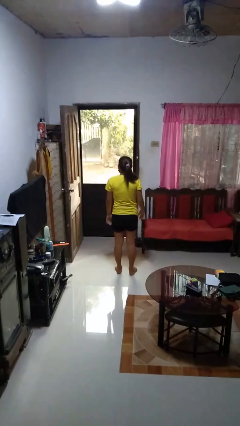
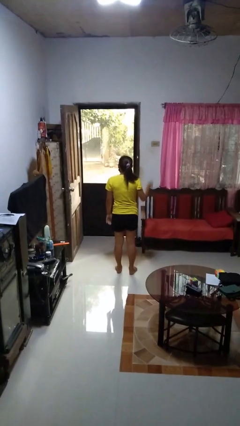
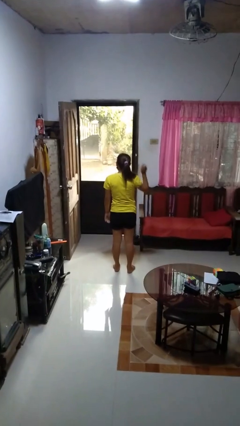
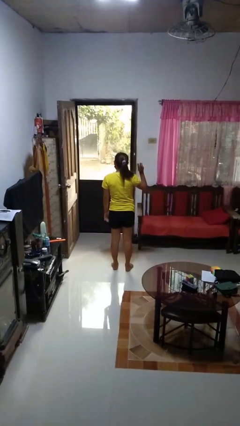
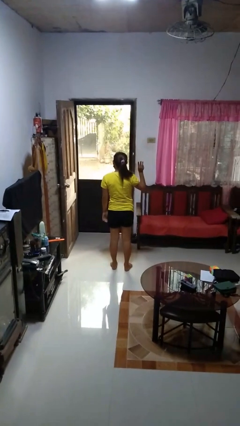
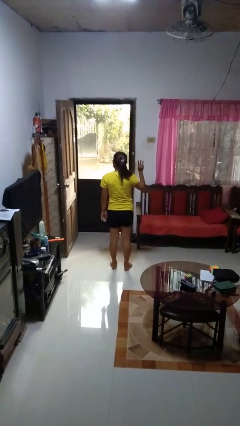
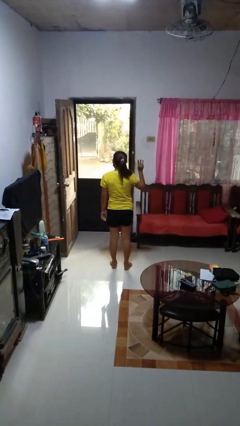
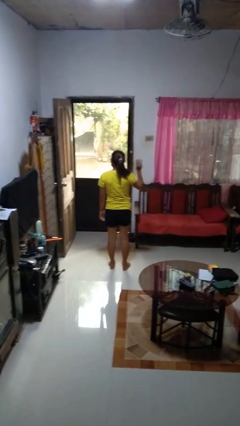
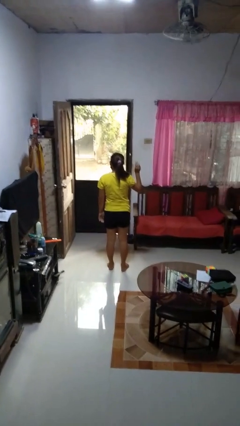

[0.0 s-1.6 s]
person gestures number three

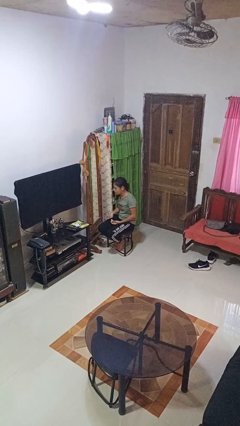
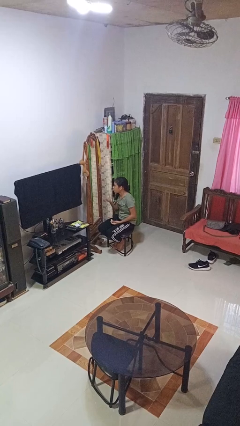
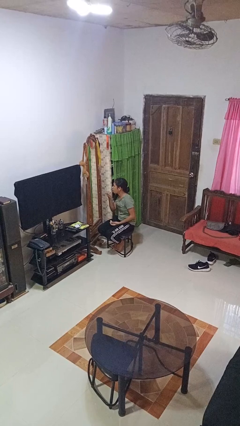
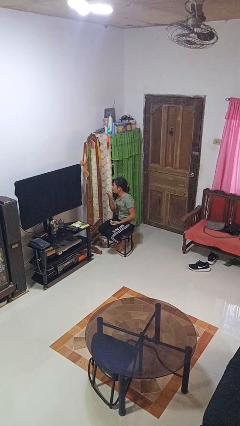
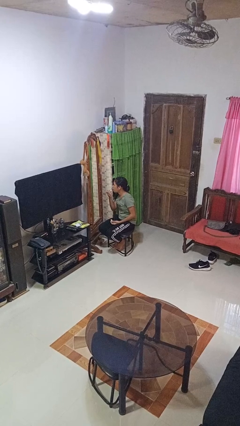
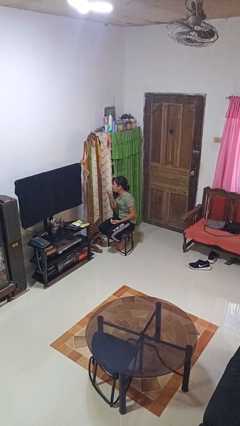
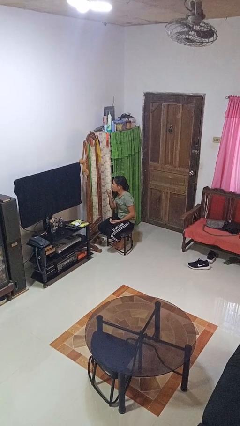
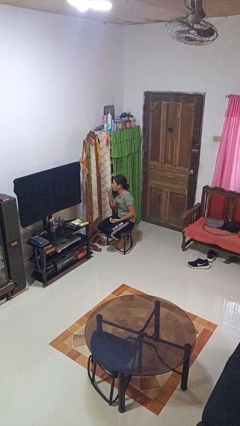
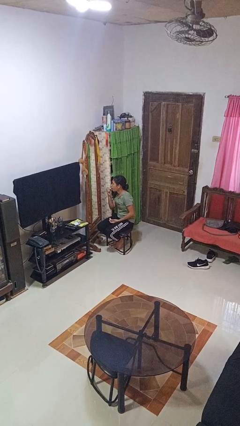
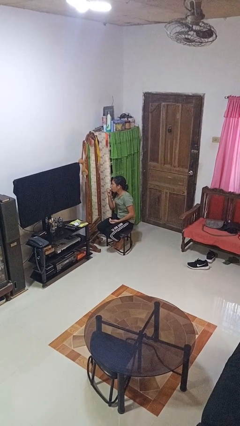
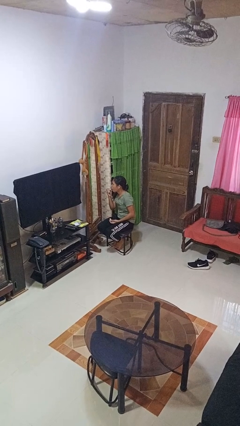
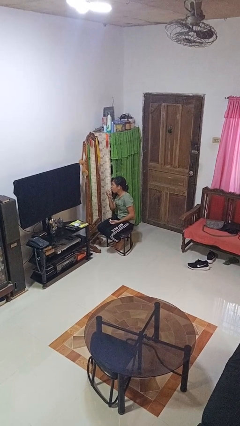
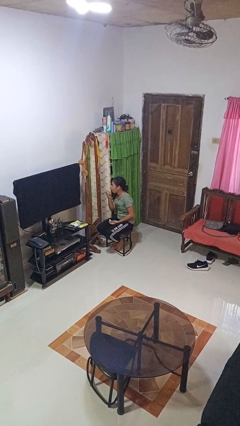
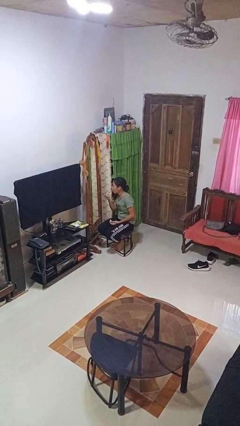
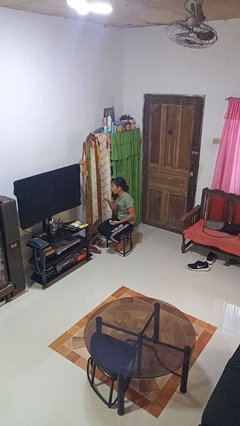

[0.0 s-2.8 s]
person applies lip makeup

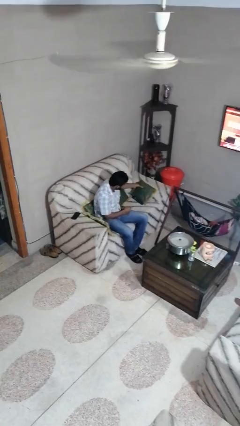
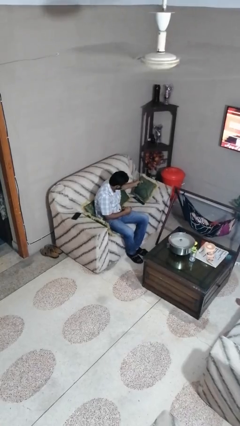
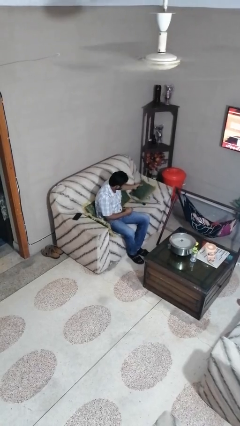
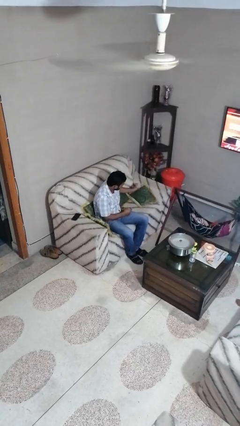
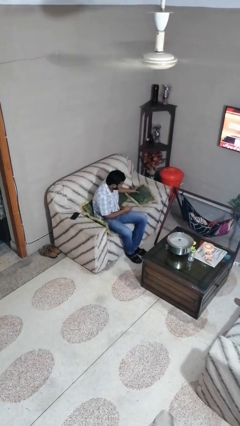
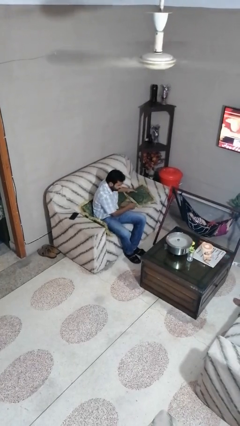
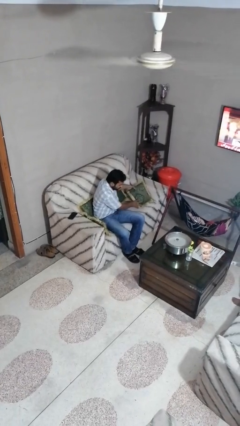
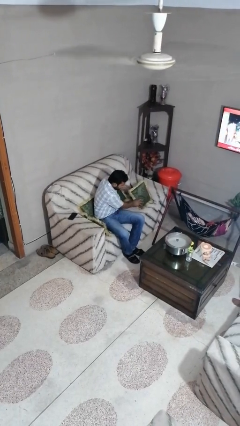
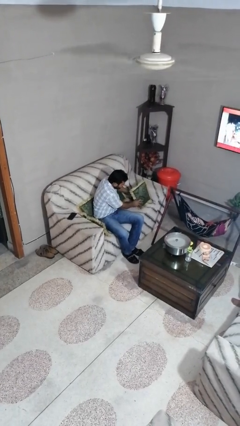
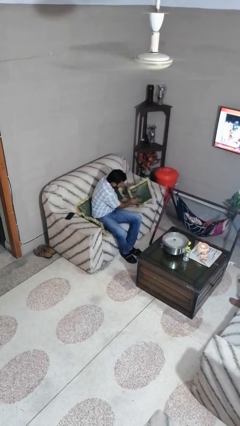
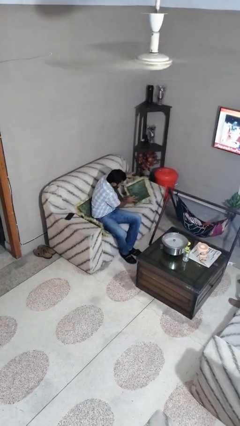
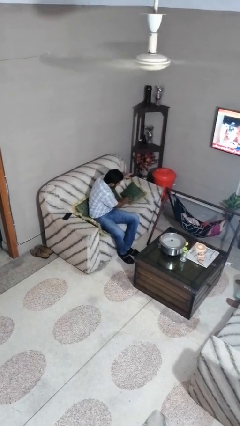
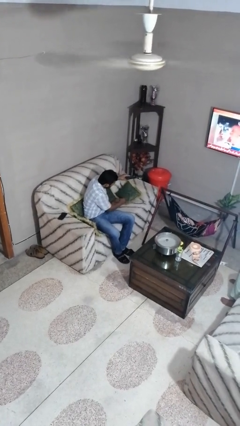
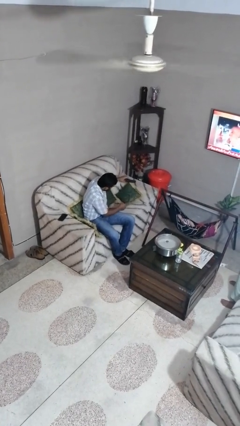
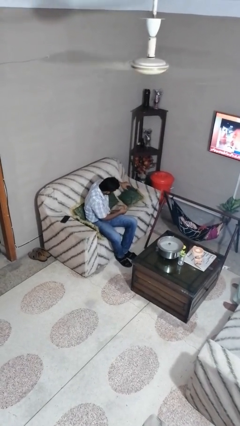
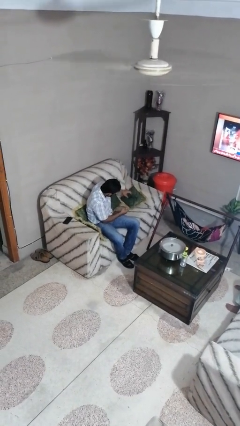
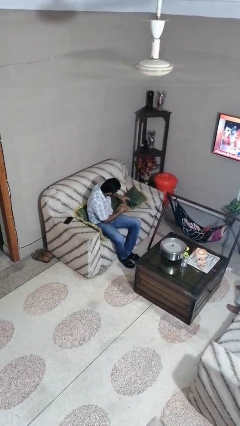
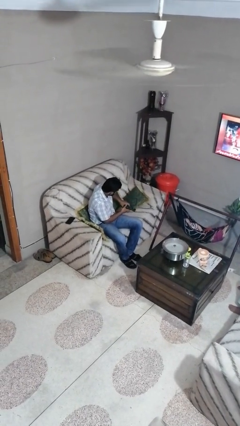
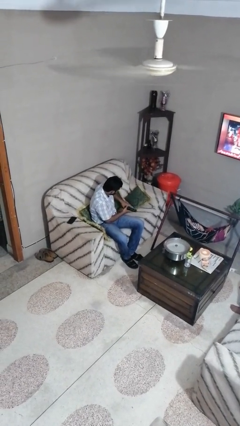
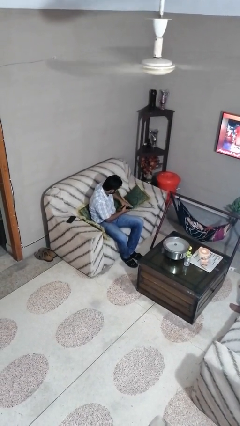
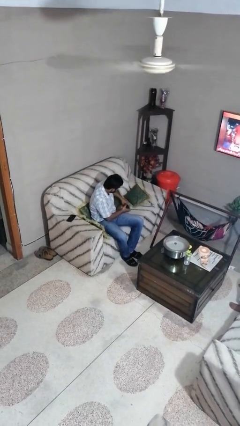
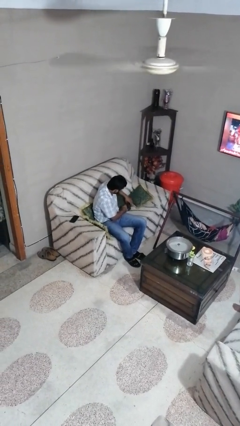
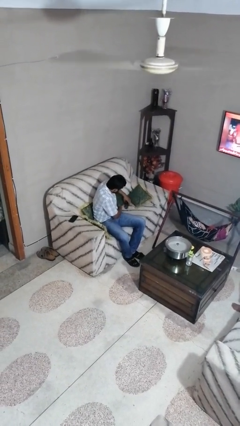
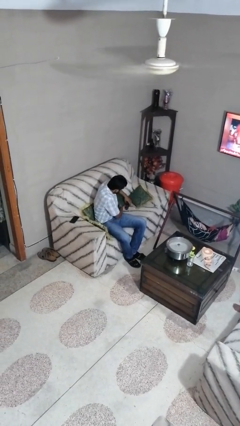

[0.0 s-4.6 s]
person searches in couch

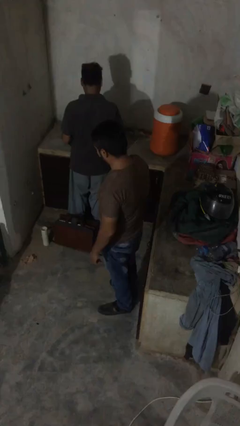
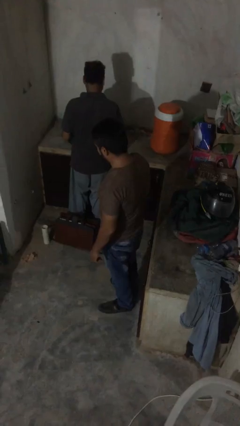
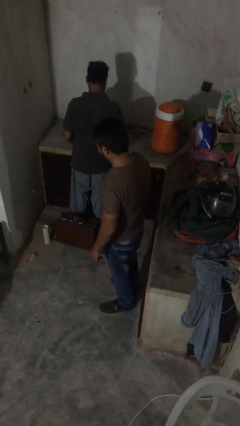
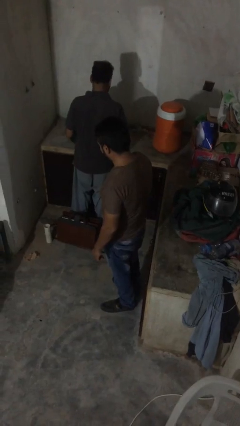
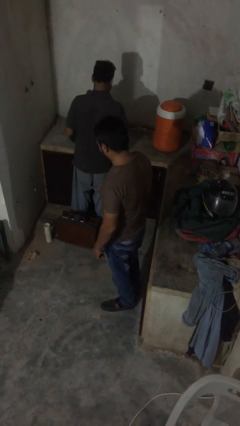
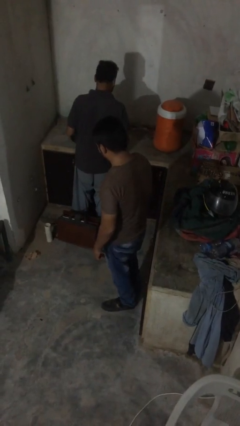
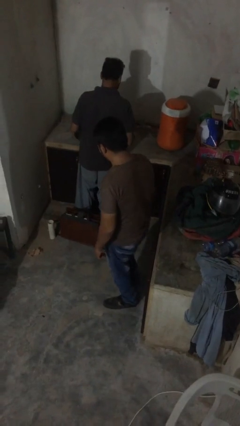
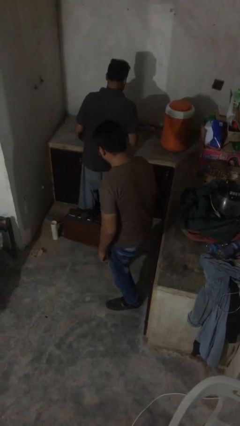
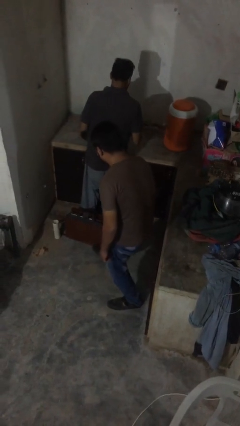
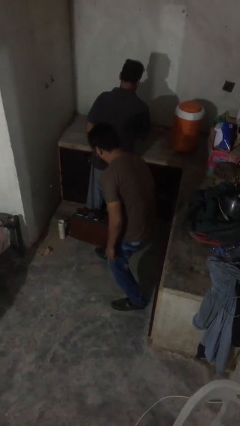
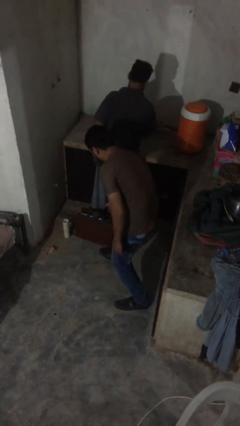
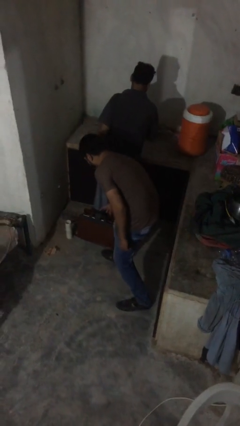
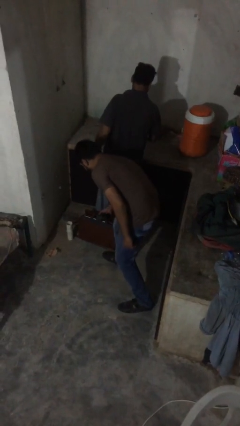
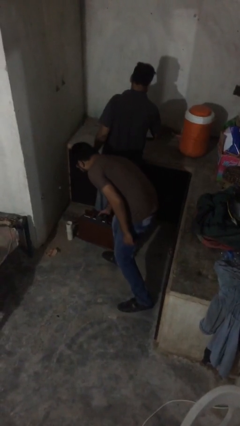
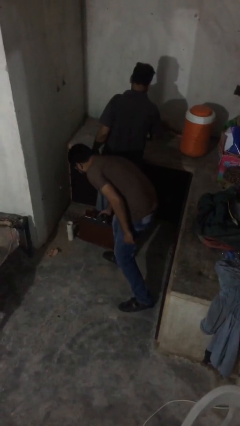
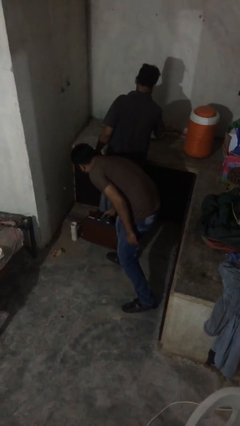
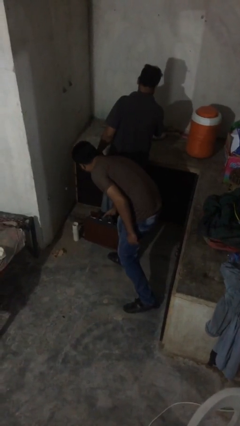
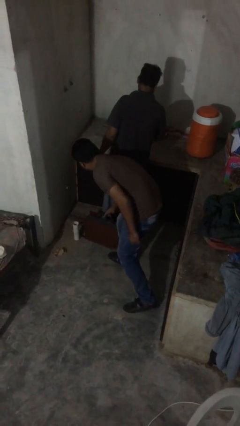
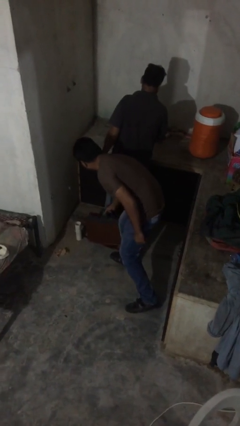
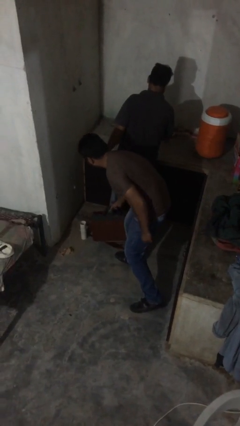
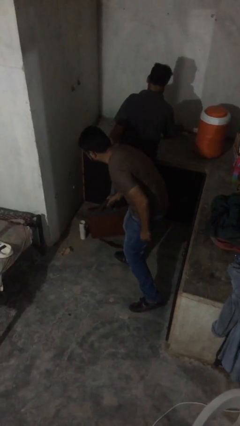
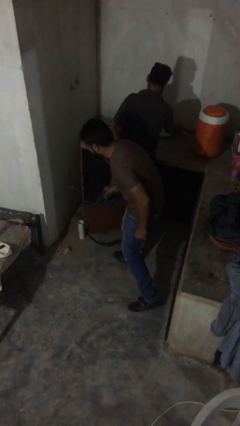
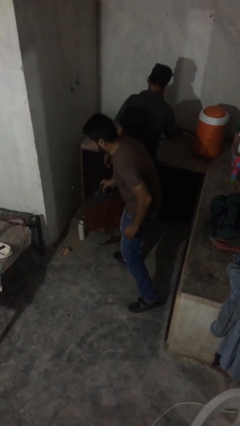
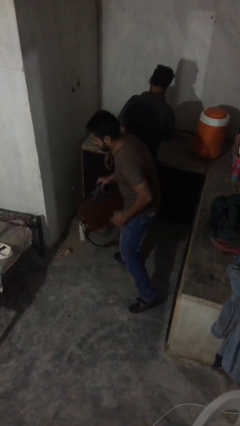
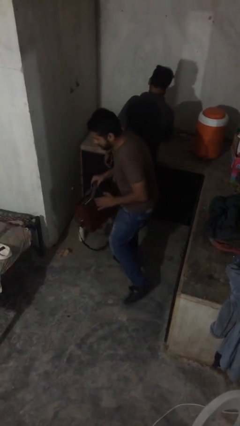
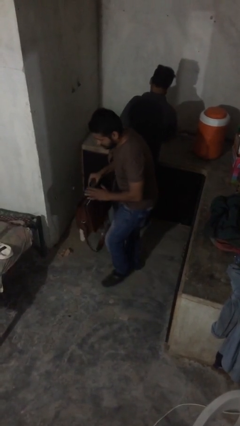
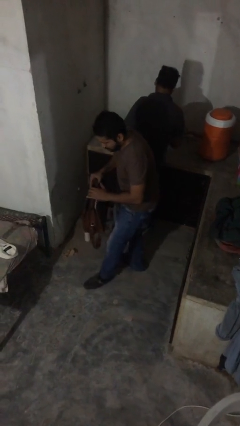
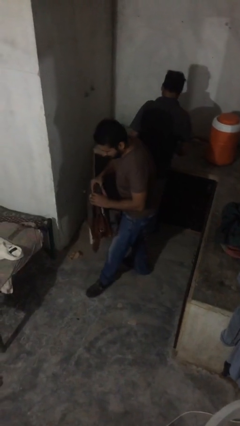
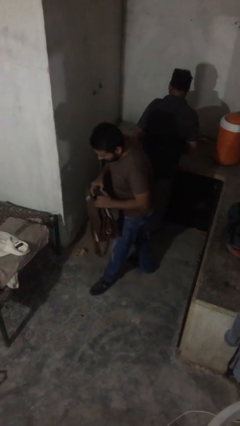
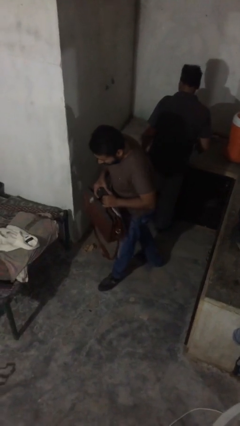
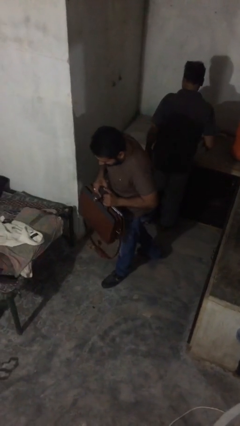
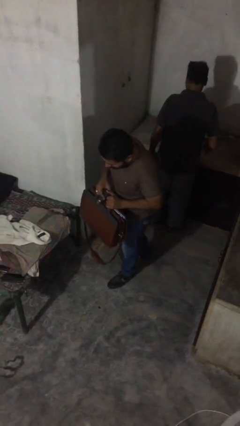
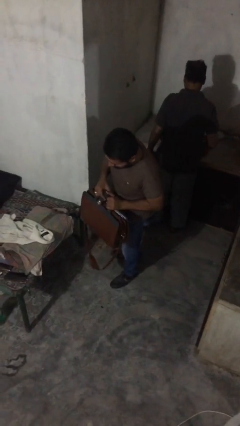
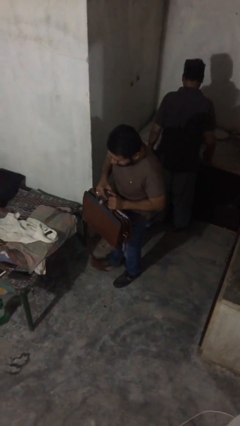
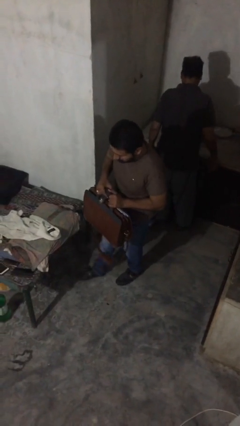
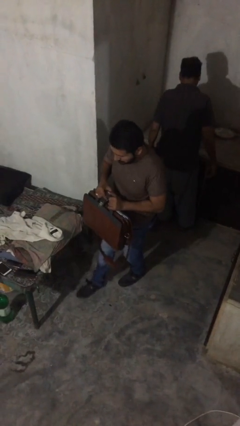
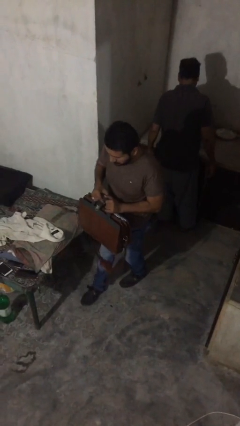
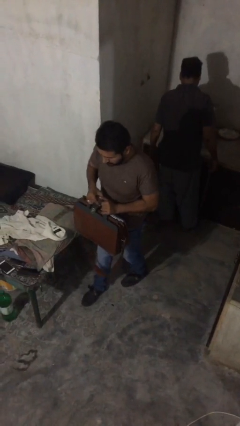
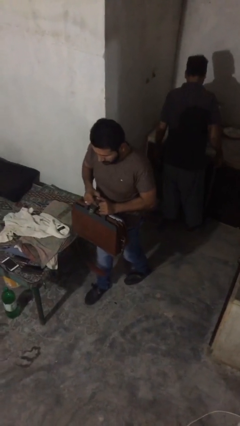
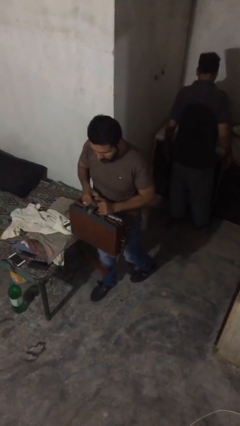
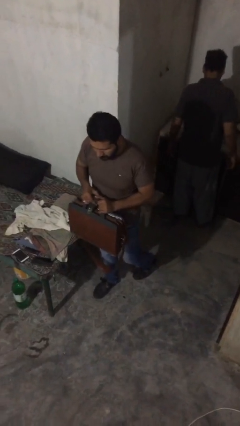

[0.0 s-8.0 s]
person steals object from person

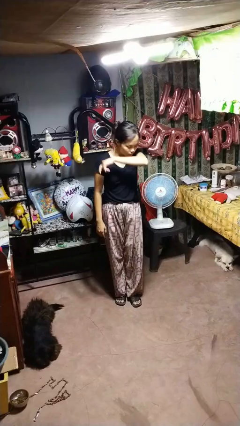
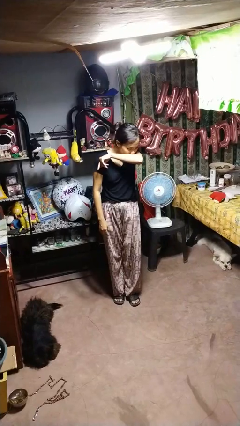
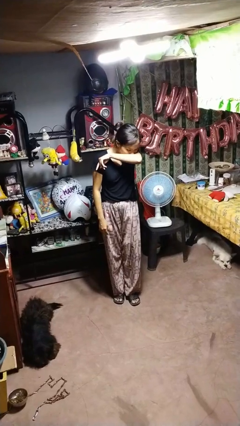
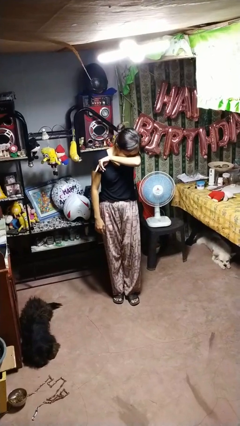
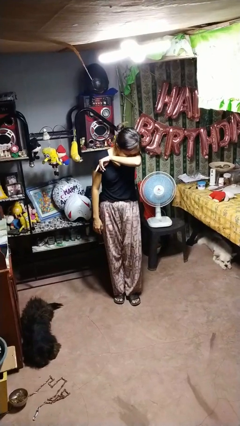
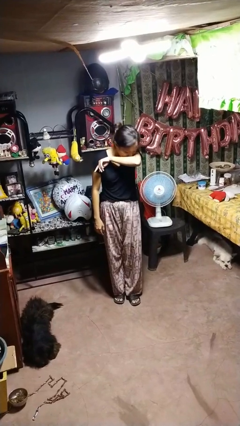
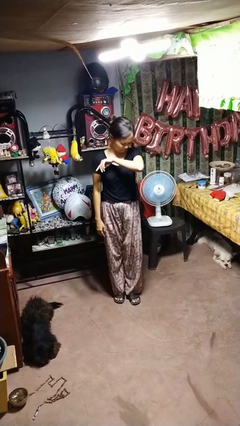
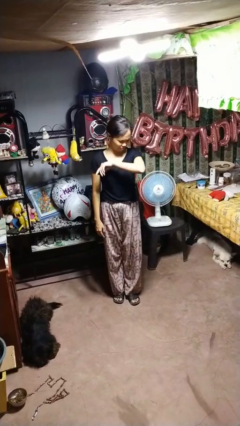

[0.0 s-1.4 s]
person sneezes into arm
